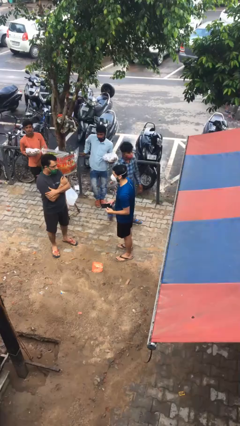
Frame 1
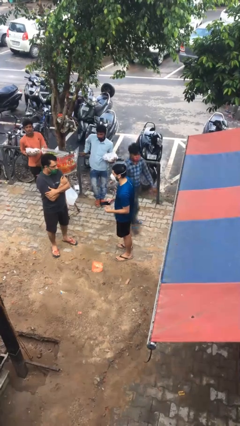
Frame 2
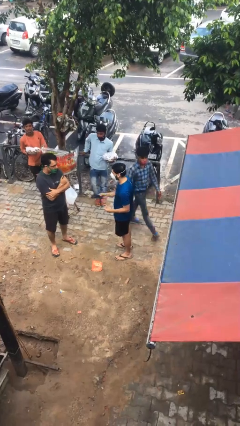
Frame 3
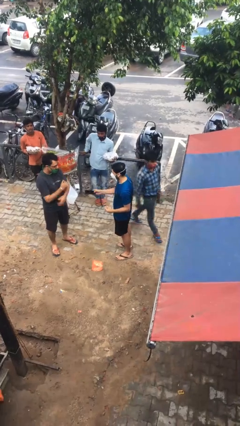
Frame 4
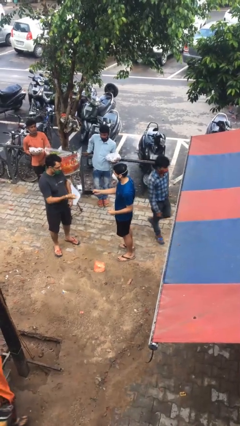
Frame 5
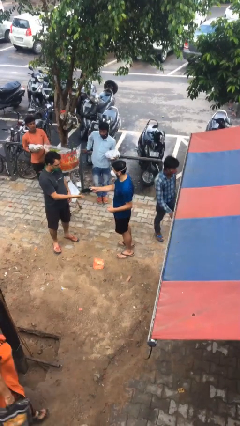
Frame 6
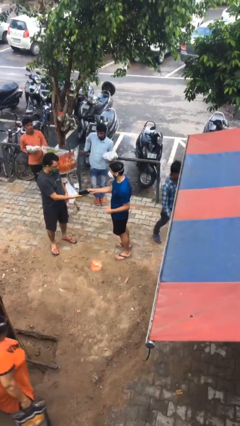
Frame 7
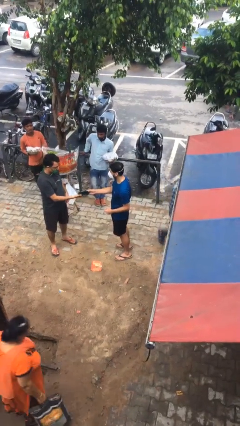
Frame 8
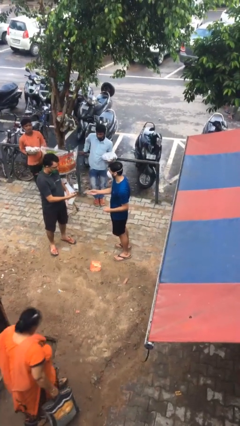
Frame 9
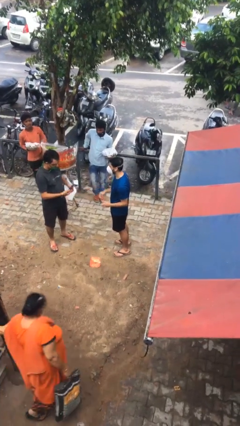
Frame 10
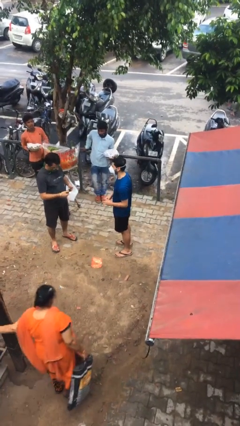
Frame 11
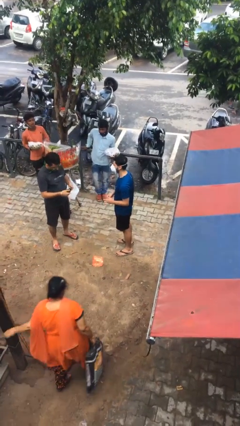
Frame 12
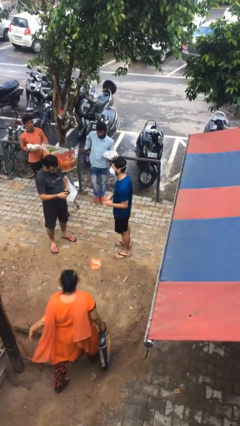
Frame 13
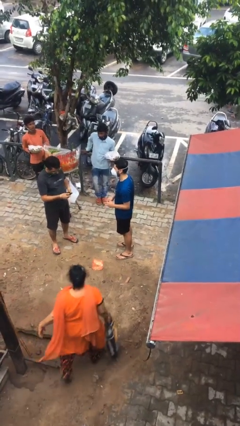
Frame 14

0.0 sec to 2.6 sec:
person transfers object to person

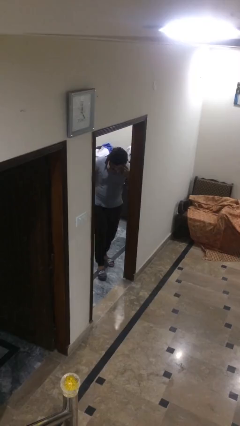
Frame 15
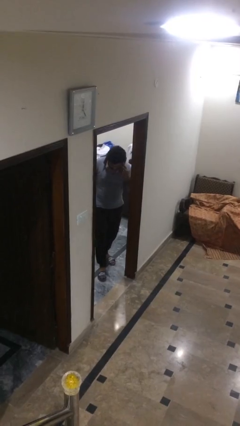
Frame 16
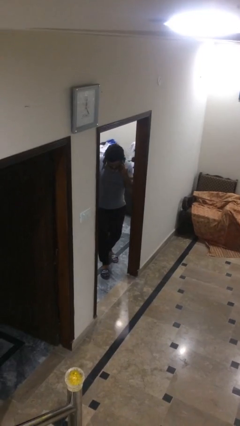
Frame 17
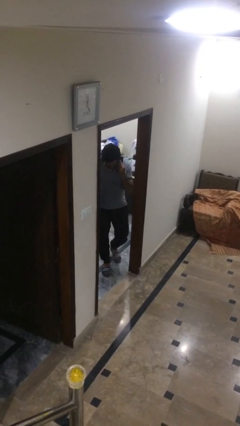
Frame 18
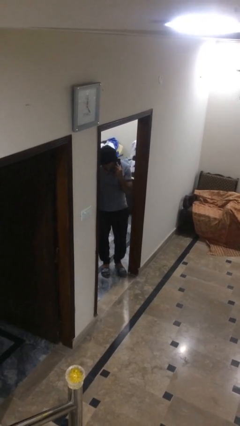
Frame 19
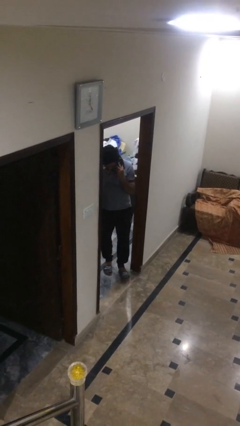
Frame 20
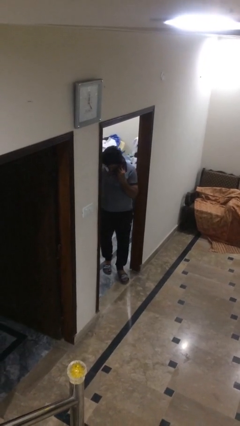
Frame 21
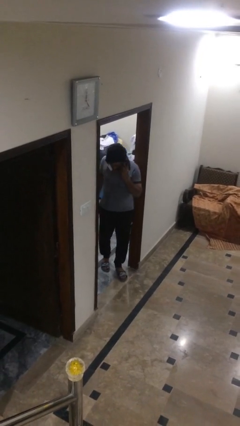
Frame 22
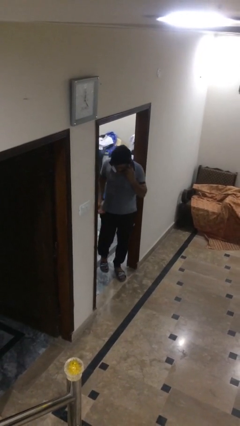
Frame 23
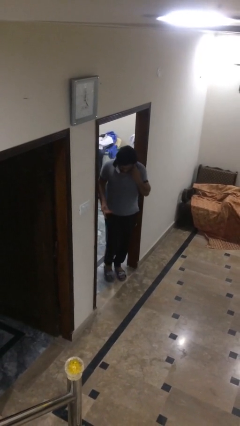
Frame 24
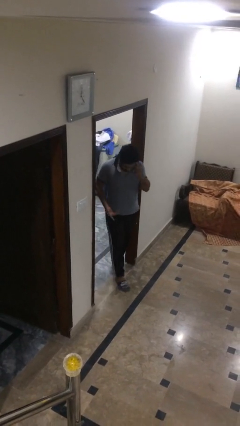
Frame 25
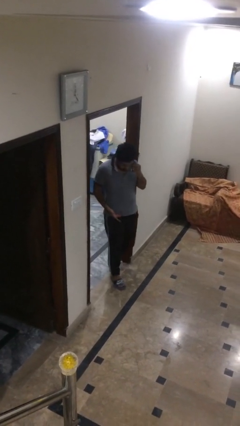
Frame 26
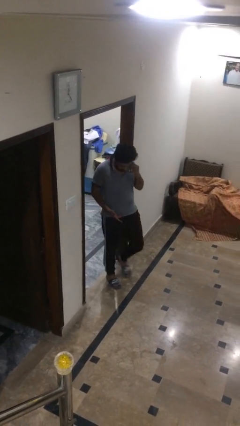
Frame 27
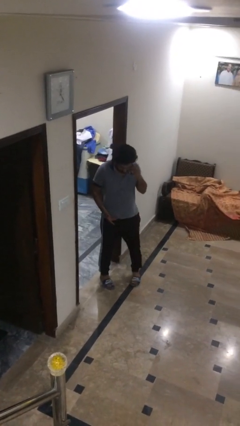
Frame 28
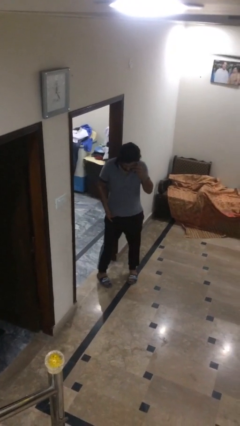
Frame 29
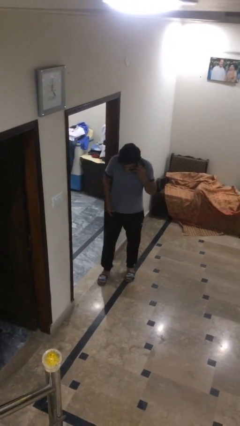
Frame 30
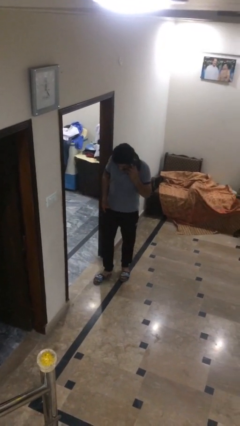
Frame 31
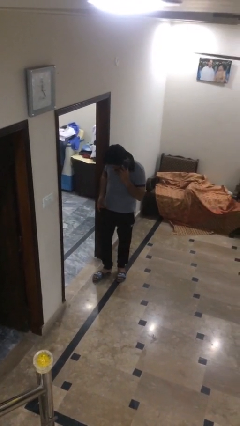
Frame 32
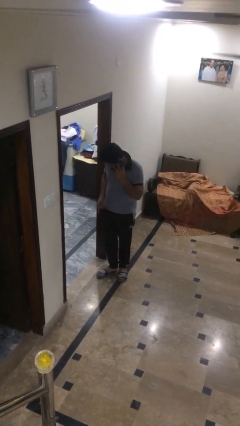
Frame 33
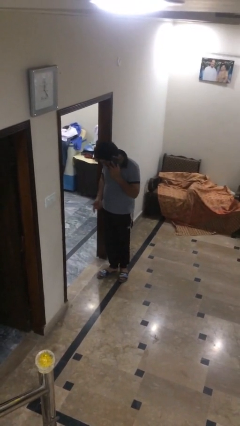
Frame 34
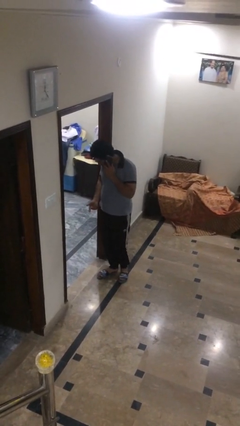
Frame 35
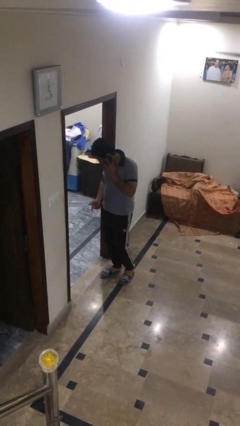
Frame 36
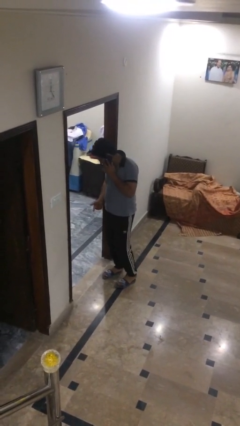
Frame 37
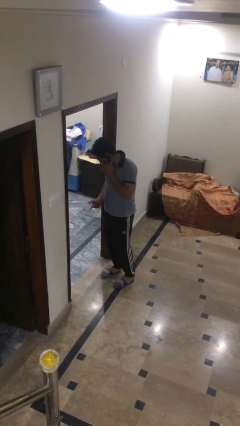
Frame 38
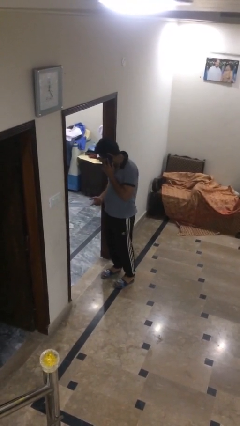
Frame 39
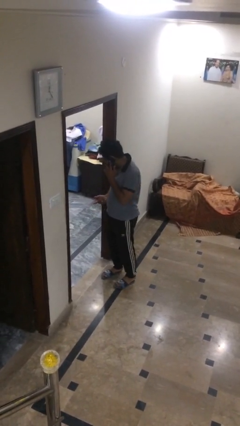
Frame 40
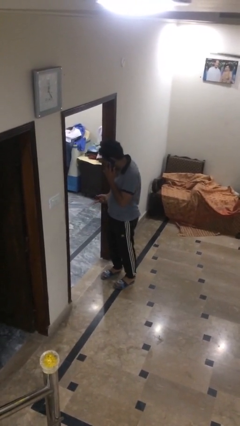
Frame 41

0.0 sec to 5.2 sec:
person enters scene through structure

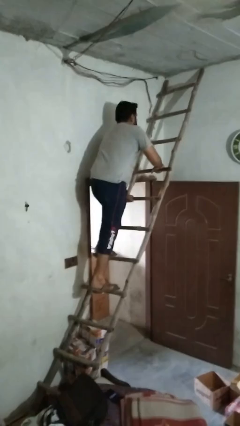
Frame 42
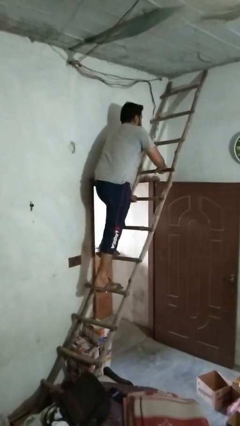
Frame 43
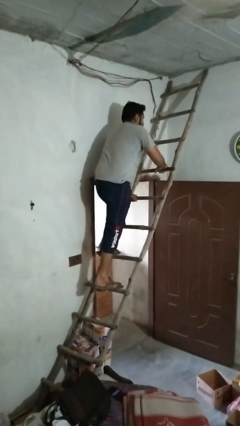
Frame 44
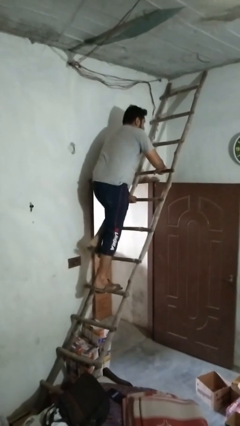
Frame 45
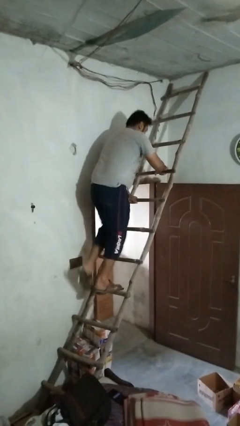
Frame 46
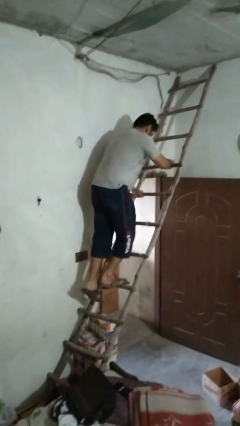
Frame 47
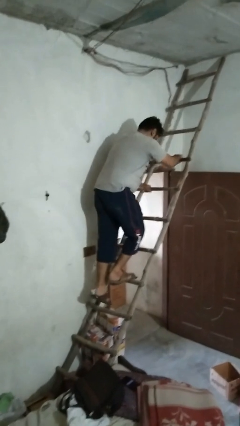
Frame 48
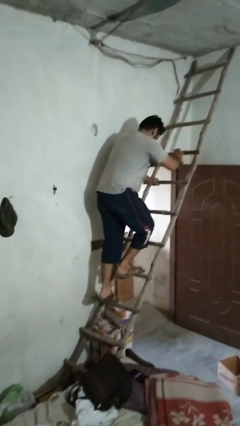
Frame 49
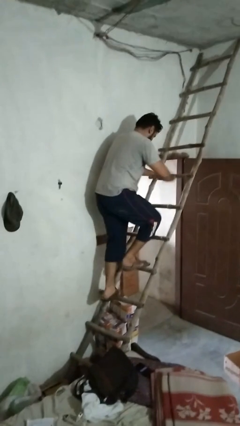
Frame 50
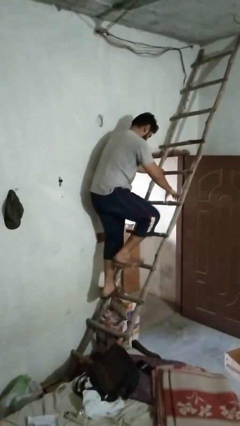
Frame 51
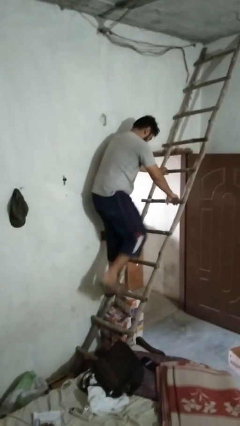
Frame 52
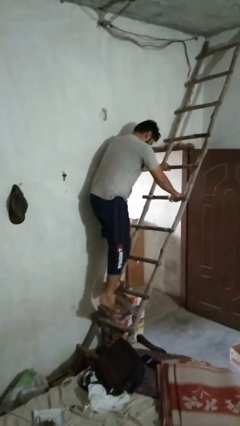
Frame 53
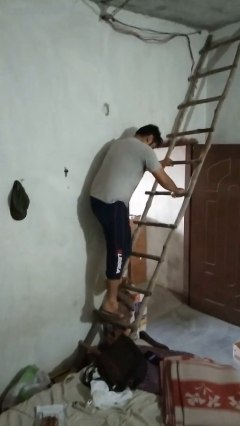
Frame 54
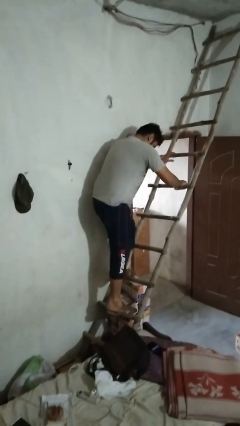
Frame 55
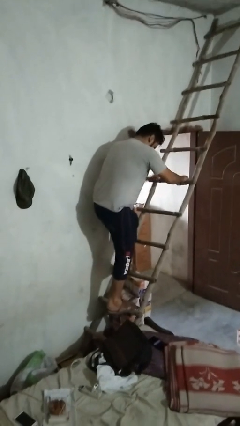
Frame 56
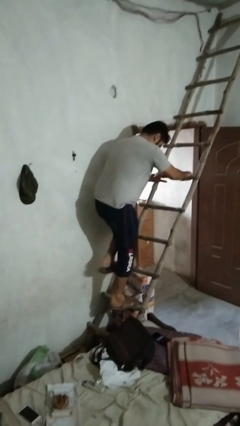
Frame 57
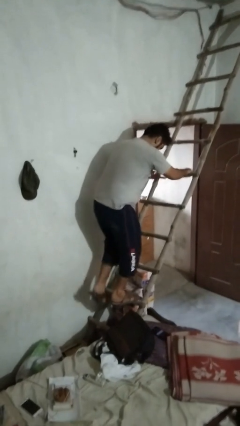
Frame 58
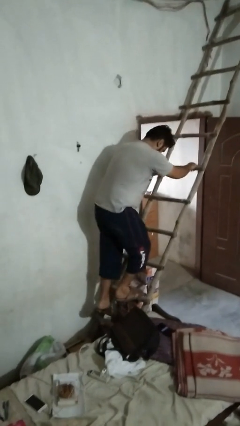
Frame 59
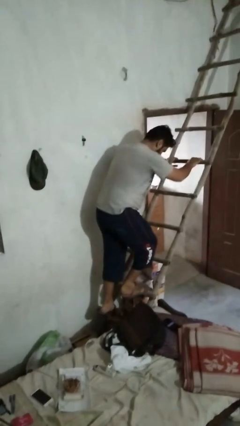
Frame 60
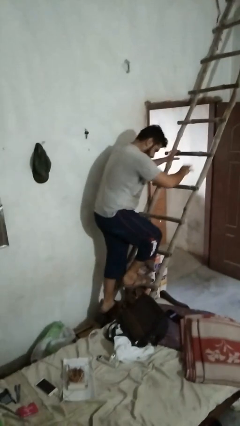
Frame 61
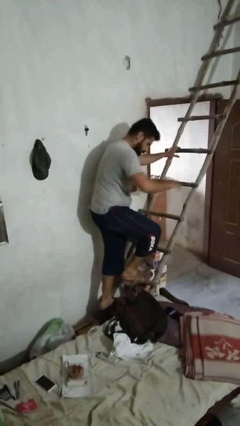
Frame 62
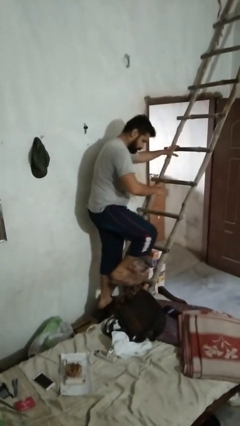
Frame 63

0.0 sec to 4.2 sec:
person climbs down ladder

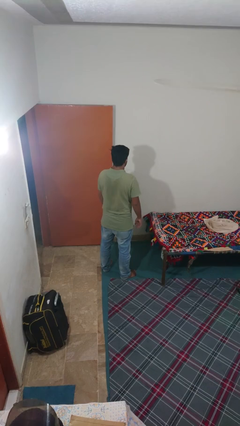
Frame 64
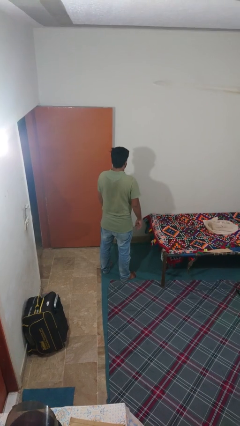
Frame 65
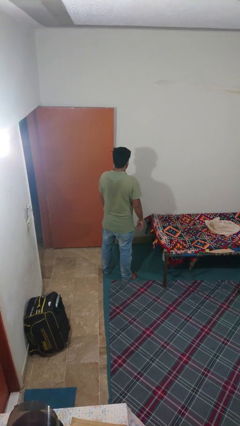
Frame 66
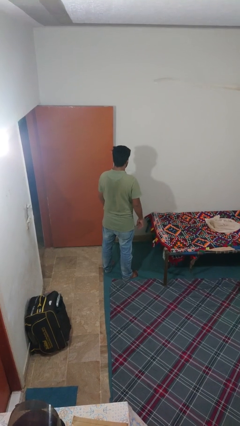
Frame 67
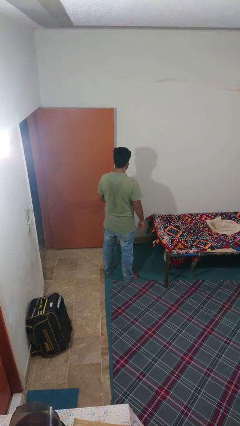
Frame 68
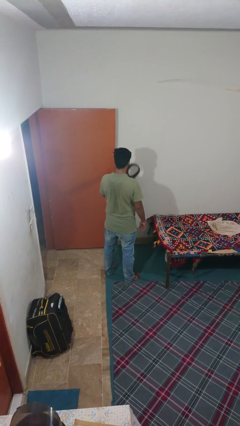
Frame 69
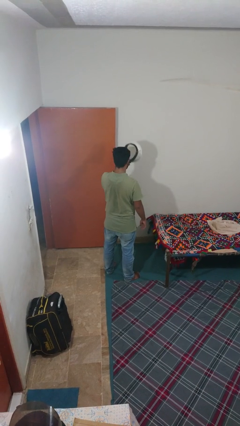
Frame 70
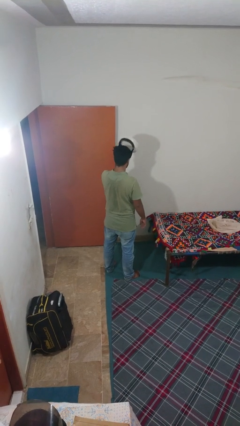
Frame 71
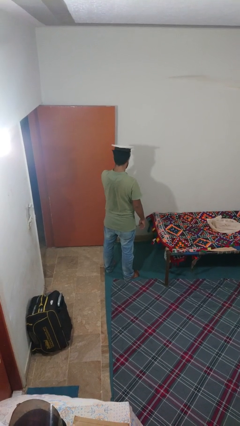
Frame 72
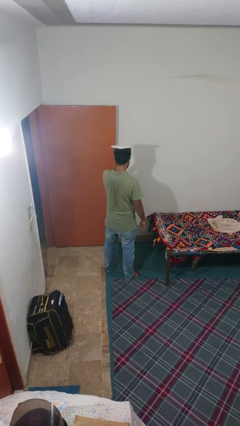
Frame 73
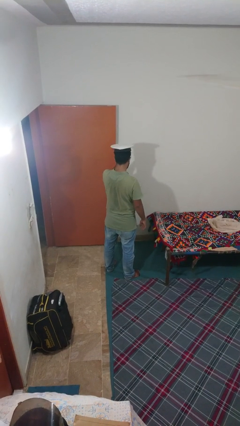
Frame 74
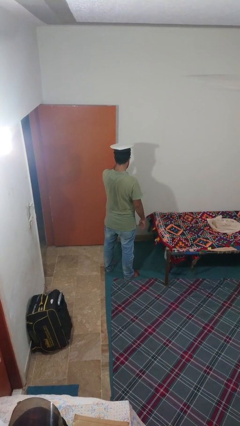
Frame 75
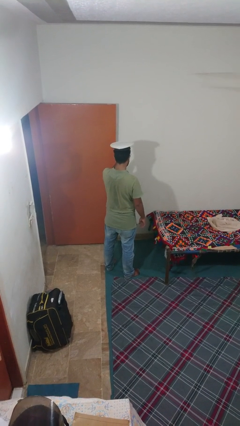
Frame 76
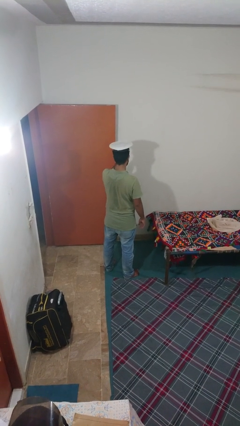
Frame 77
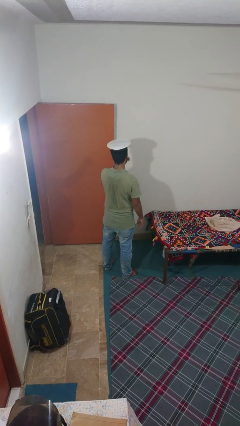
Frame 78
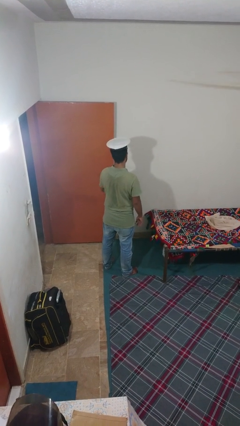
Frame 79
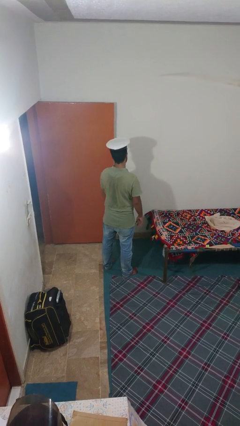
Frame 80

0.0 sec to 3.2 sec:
person puts on hat

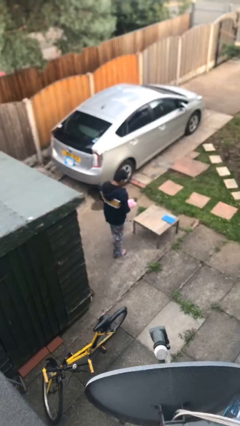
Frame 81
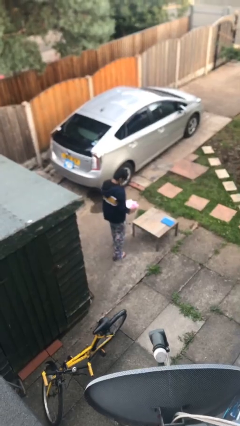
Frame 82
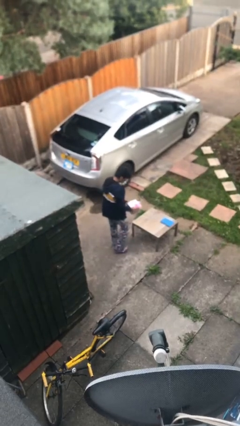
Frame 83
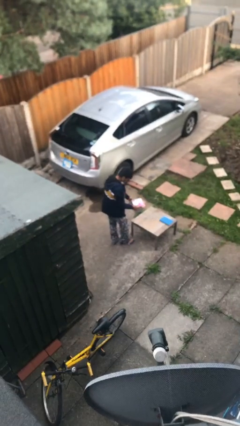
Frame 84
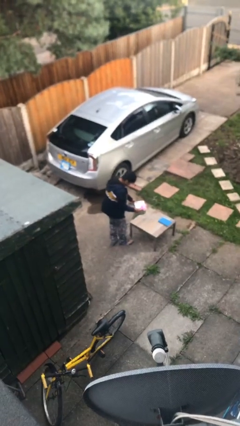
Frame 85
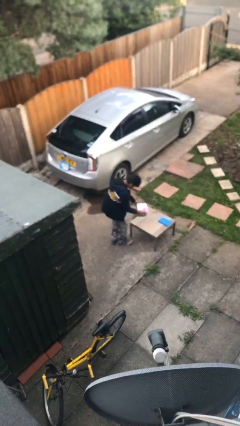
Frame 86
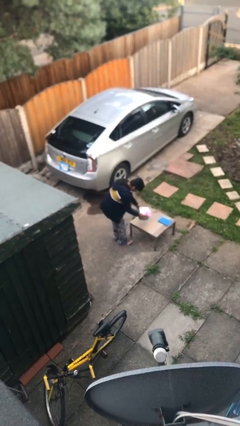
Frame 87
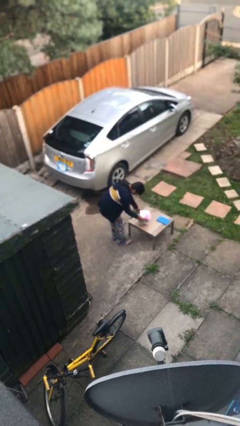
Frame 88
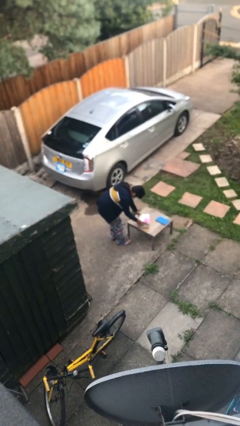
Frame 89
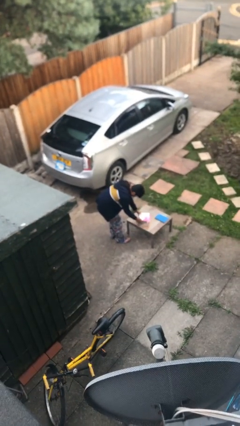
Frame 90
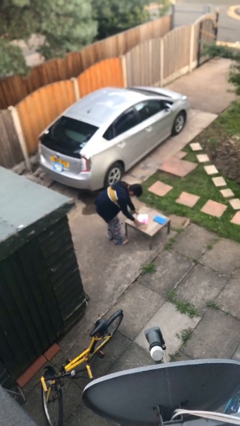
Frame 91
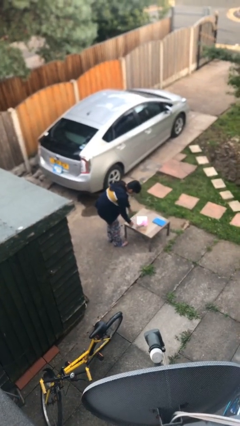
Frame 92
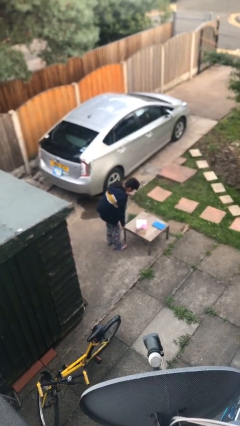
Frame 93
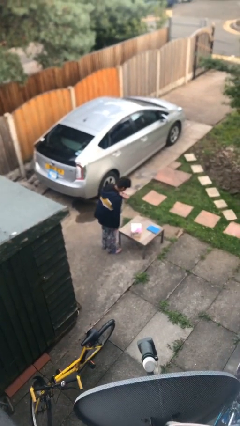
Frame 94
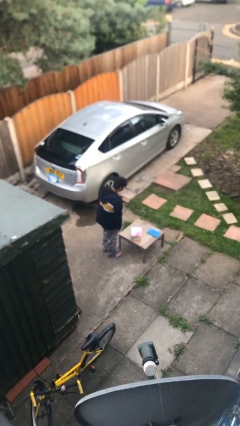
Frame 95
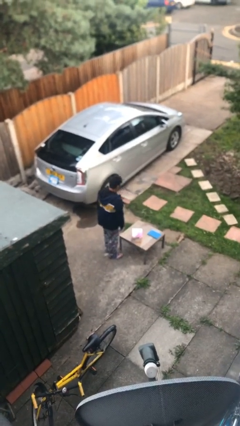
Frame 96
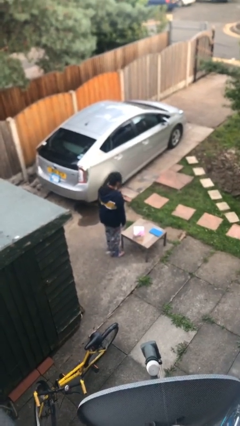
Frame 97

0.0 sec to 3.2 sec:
person puts down object on table
